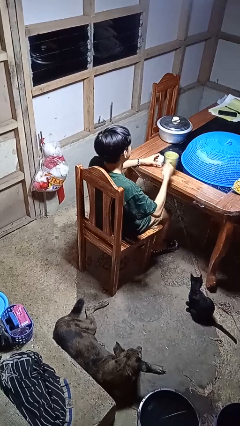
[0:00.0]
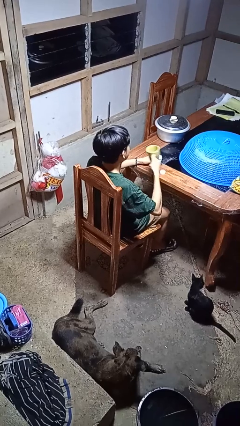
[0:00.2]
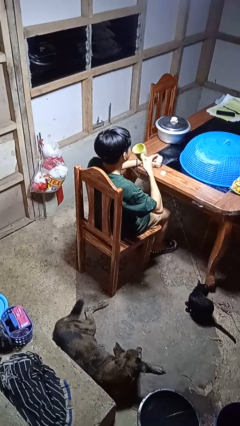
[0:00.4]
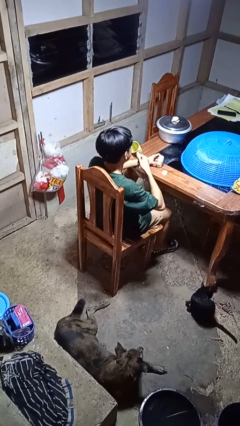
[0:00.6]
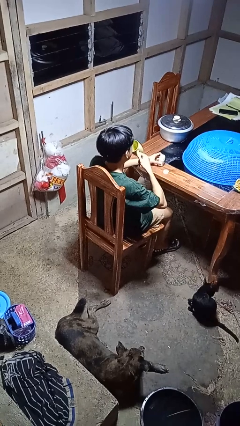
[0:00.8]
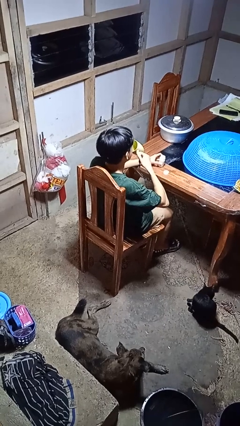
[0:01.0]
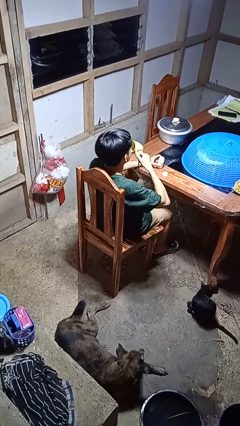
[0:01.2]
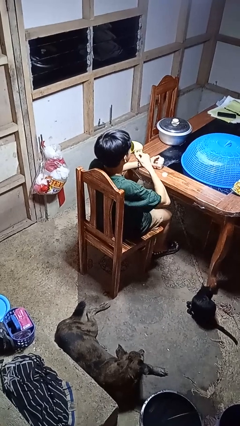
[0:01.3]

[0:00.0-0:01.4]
person drinks from cup

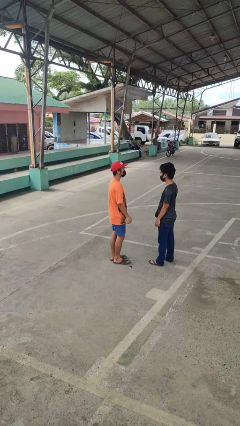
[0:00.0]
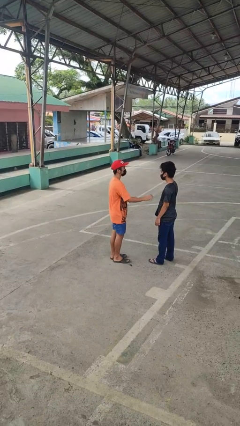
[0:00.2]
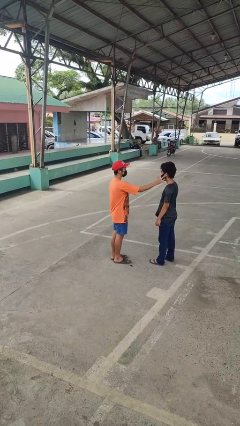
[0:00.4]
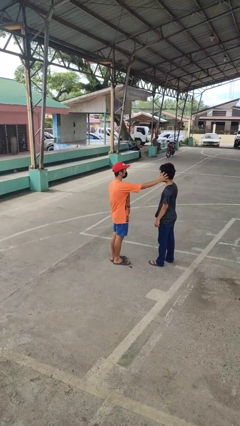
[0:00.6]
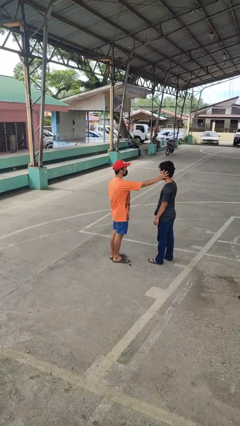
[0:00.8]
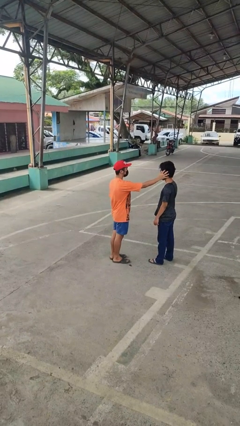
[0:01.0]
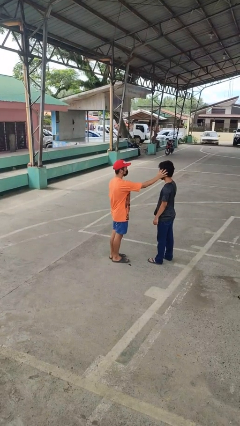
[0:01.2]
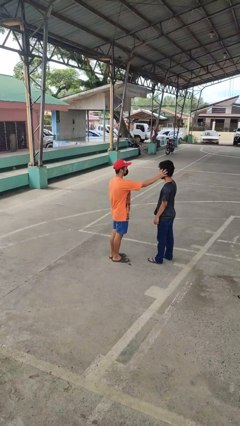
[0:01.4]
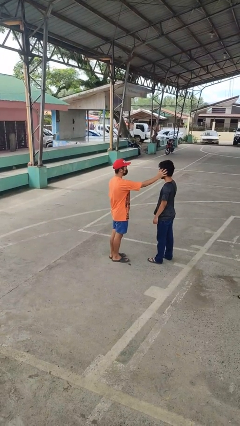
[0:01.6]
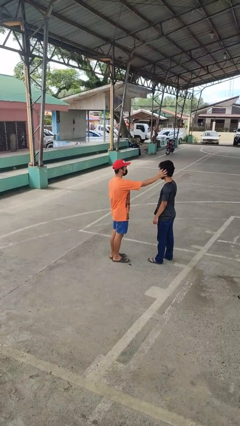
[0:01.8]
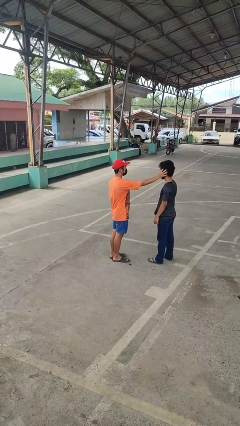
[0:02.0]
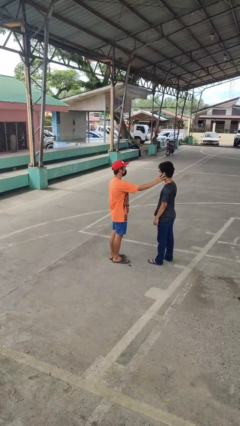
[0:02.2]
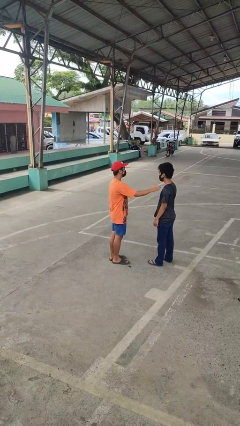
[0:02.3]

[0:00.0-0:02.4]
person touches face of person

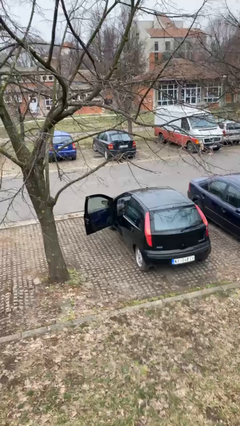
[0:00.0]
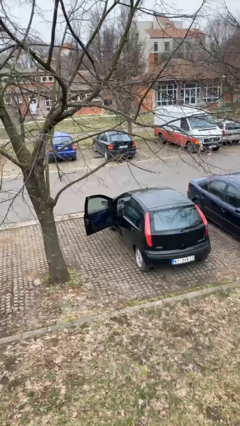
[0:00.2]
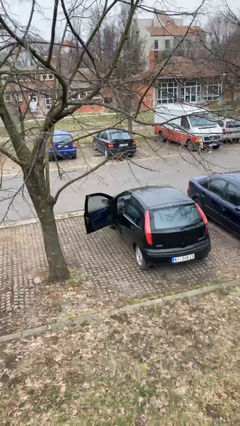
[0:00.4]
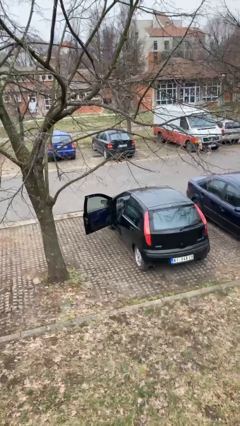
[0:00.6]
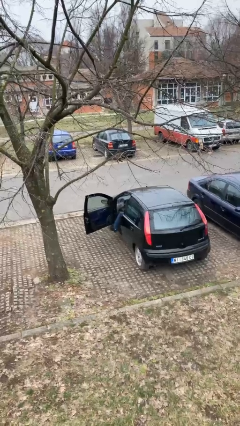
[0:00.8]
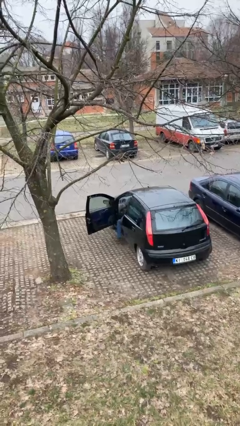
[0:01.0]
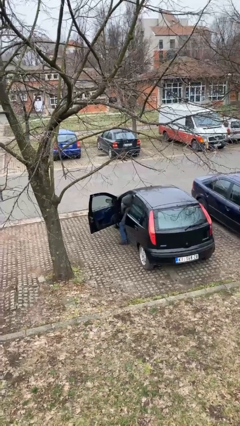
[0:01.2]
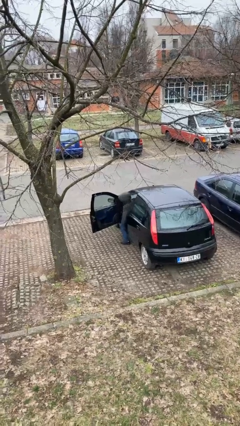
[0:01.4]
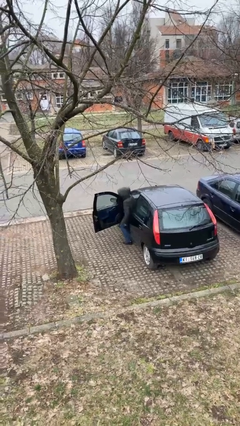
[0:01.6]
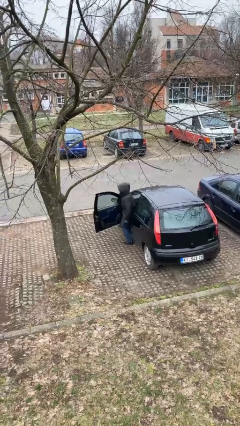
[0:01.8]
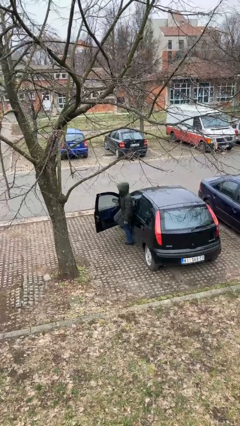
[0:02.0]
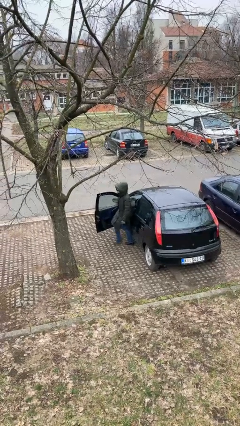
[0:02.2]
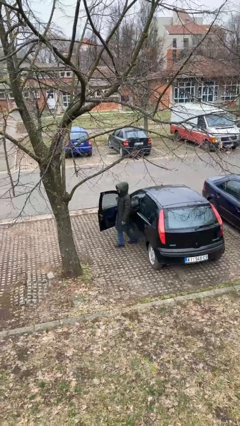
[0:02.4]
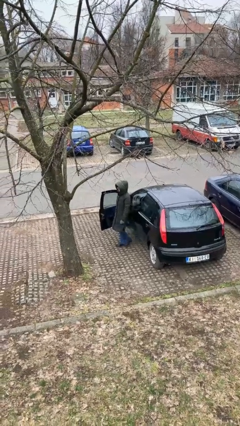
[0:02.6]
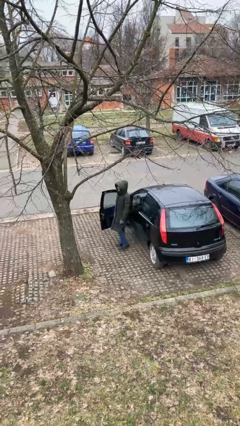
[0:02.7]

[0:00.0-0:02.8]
person exits car

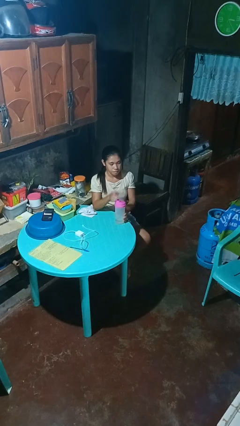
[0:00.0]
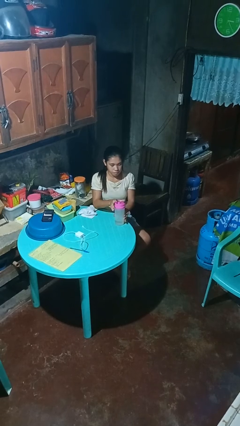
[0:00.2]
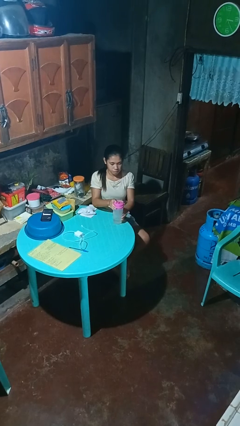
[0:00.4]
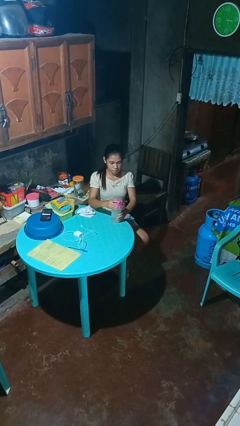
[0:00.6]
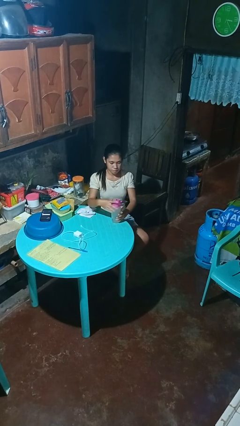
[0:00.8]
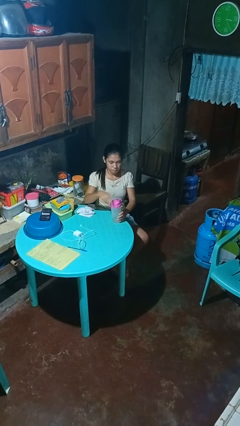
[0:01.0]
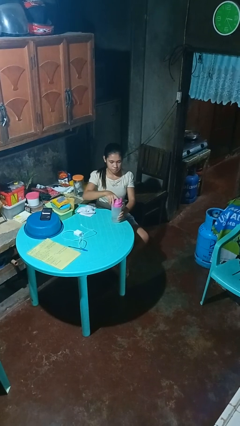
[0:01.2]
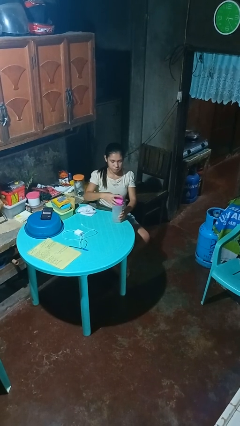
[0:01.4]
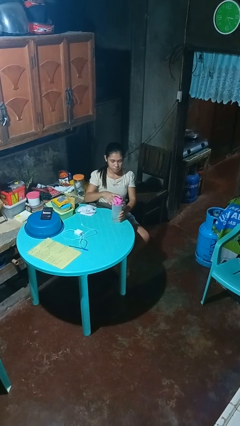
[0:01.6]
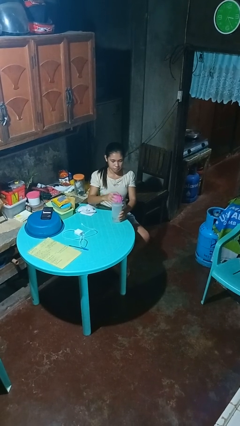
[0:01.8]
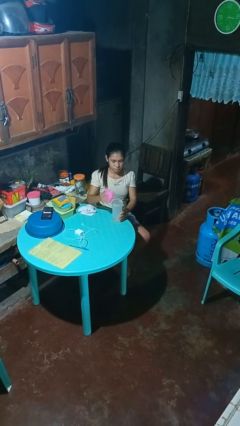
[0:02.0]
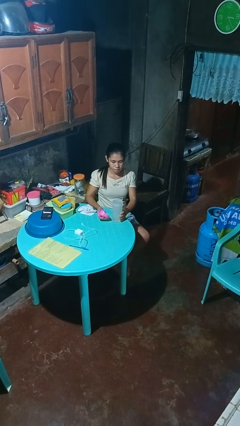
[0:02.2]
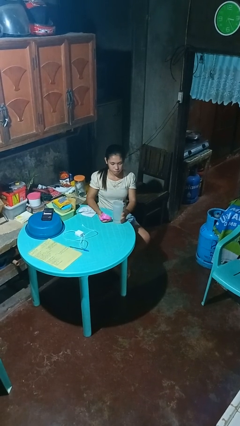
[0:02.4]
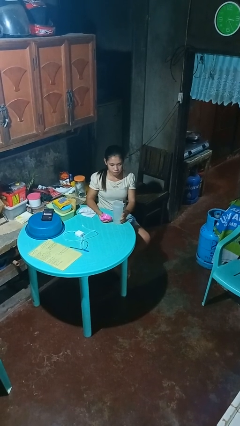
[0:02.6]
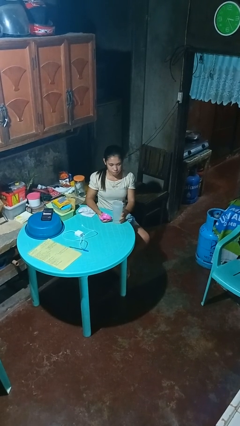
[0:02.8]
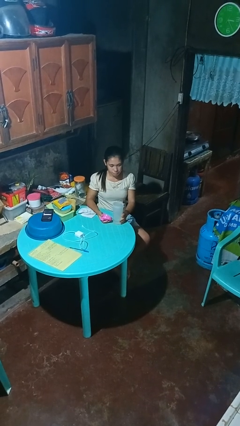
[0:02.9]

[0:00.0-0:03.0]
person unscrews lid from bottle

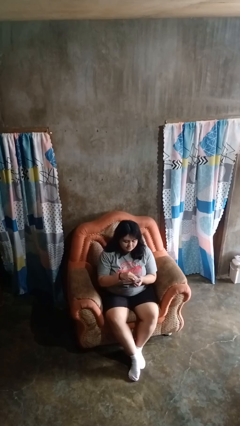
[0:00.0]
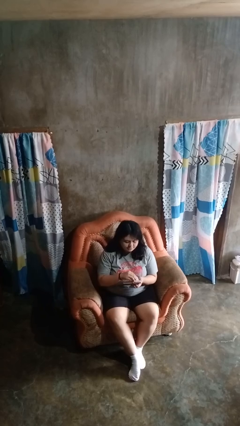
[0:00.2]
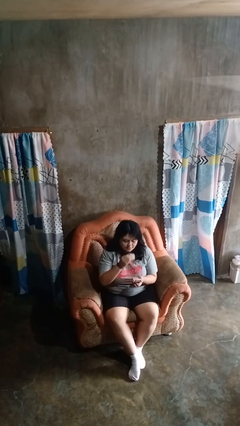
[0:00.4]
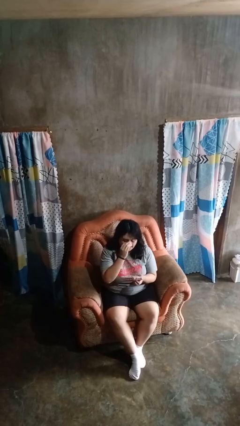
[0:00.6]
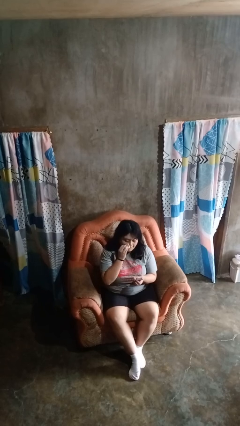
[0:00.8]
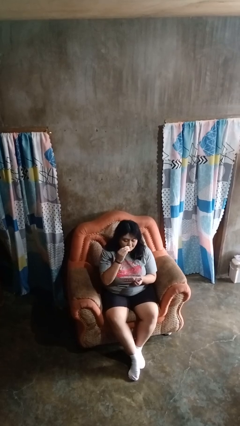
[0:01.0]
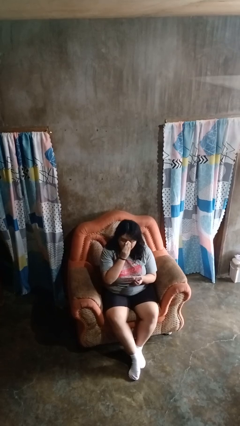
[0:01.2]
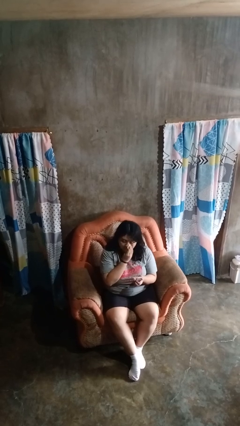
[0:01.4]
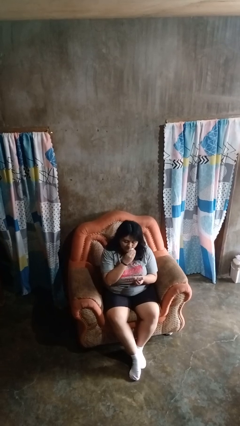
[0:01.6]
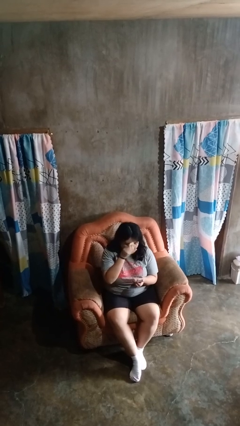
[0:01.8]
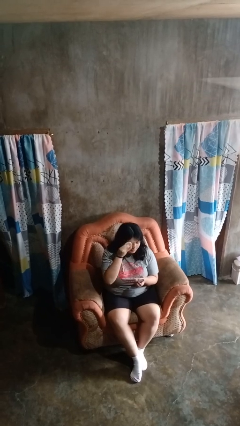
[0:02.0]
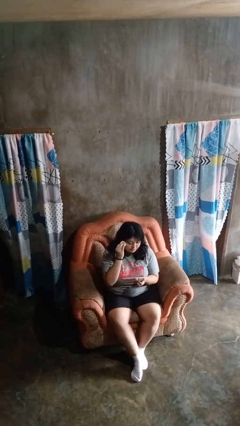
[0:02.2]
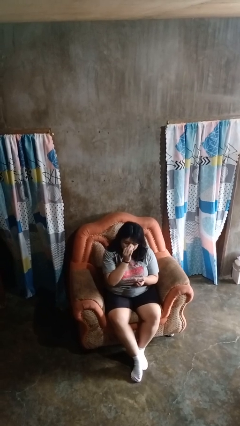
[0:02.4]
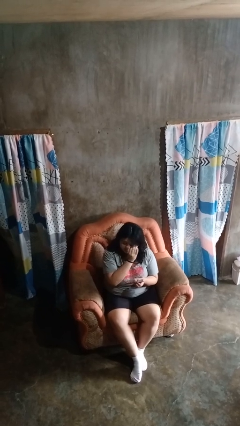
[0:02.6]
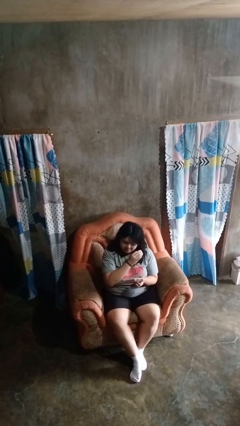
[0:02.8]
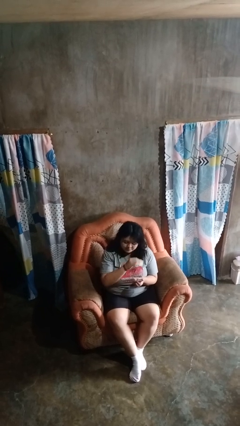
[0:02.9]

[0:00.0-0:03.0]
person applies foundation makeup

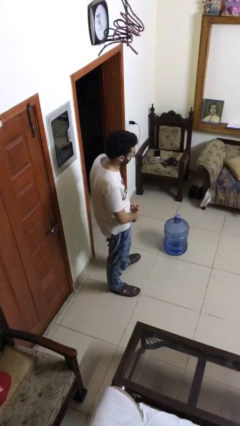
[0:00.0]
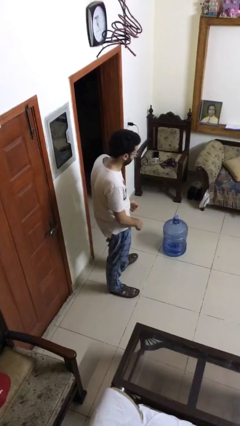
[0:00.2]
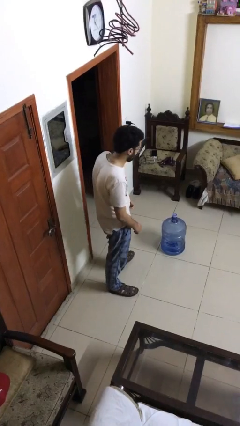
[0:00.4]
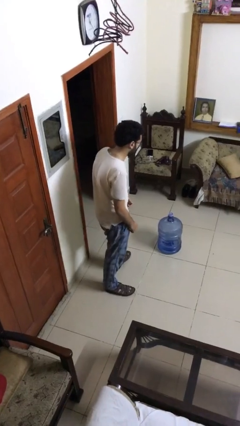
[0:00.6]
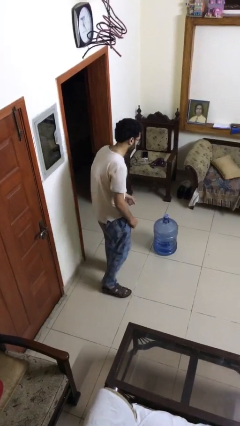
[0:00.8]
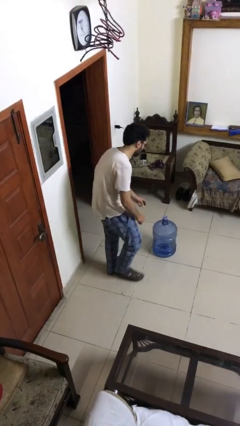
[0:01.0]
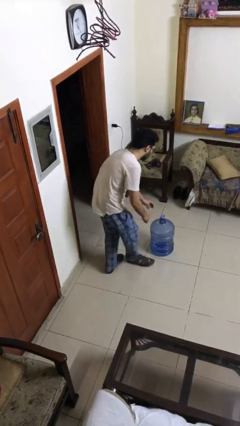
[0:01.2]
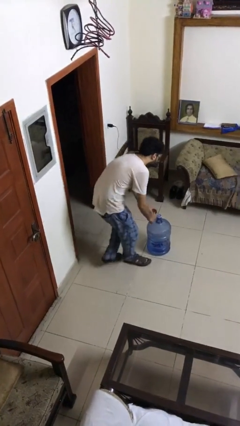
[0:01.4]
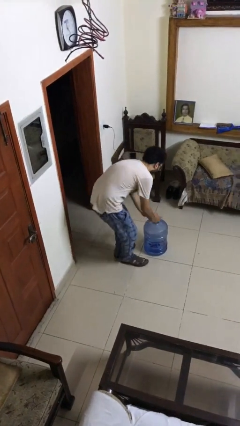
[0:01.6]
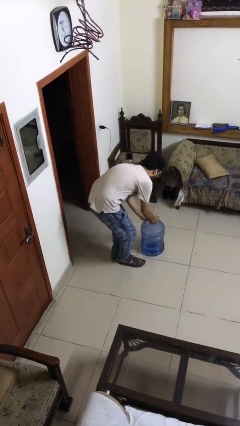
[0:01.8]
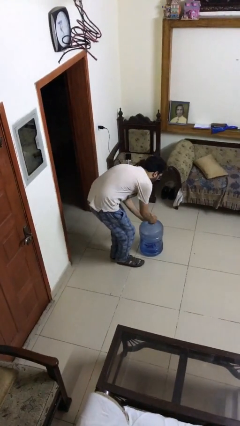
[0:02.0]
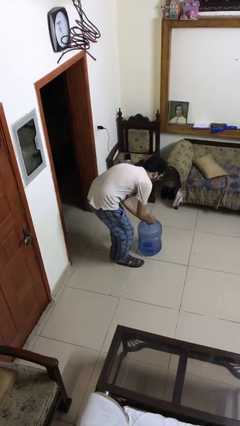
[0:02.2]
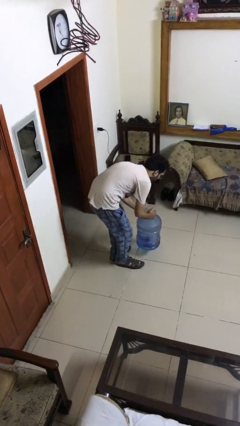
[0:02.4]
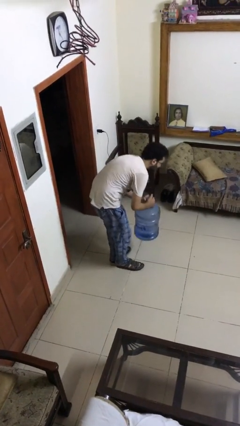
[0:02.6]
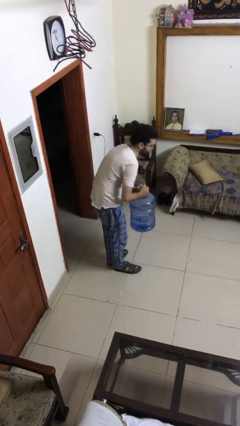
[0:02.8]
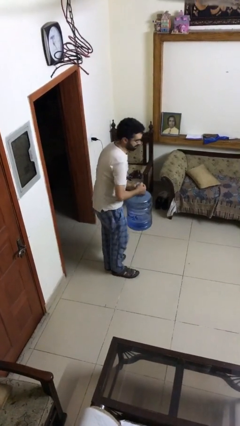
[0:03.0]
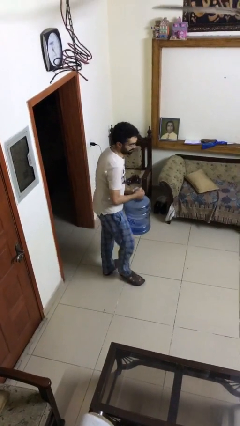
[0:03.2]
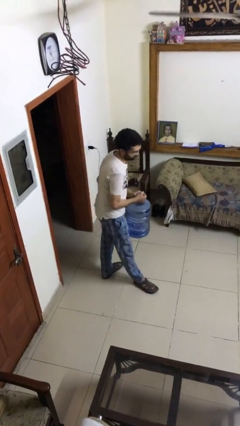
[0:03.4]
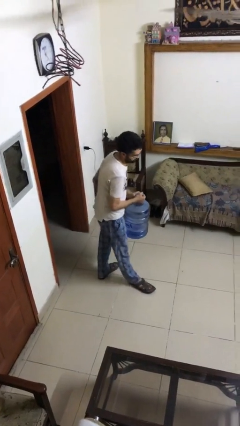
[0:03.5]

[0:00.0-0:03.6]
person picks up object from floor

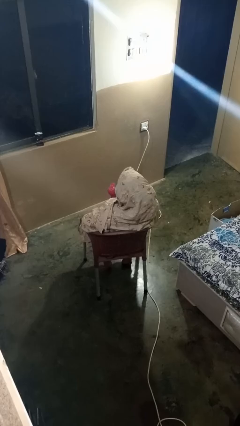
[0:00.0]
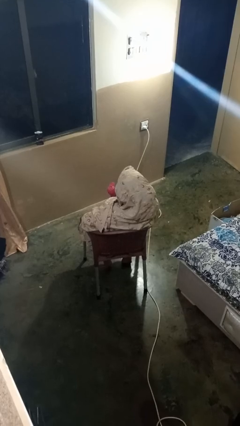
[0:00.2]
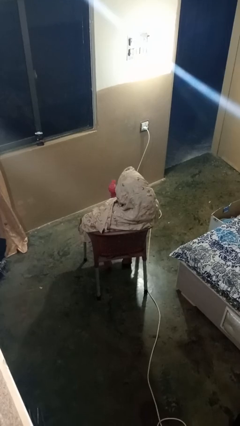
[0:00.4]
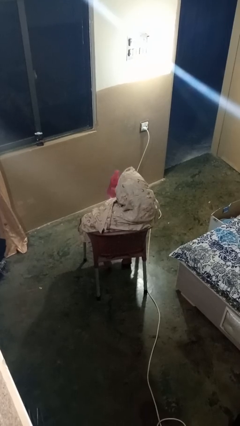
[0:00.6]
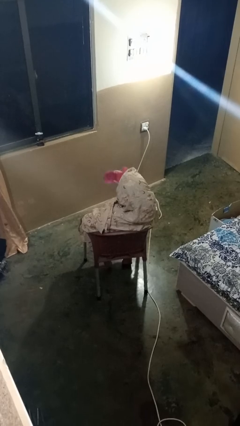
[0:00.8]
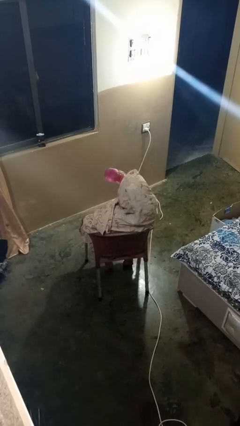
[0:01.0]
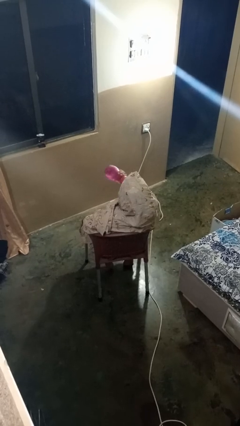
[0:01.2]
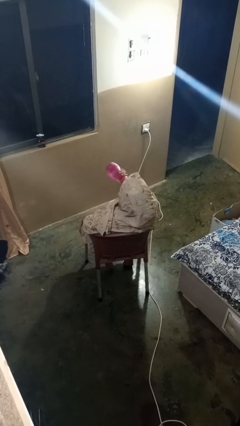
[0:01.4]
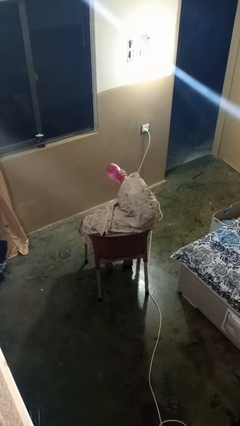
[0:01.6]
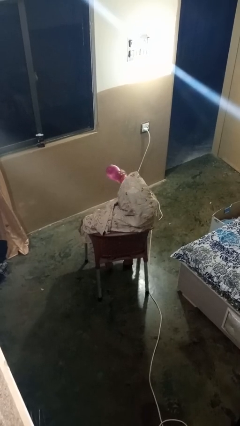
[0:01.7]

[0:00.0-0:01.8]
person drinks from bottle
